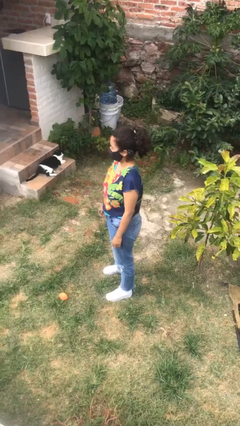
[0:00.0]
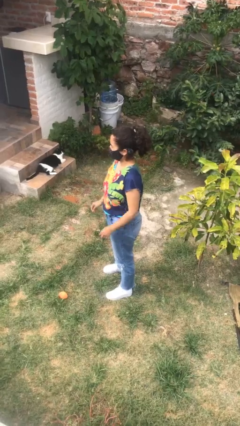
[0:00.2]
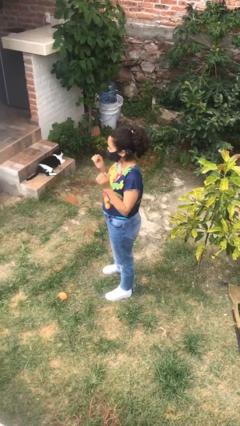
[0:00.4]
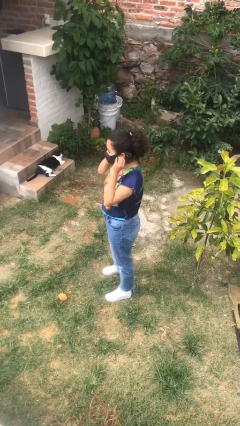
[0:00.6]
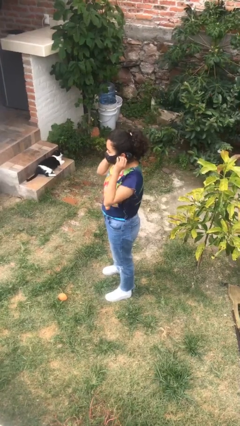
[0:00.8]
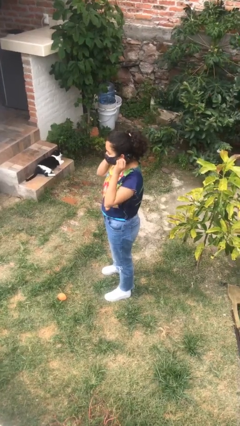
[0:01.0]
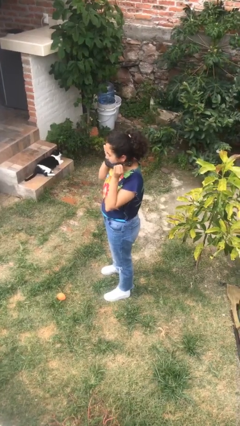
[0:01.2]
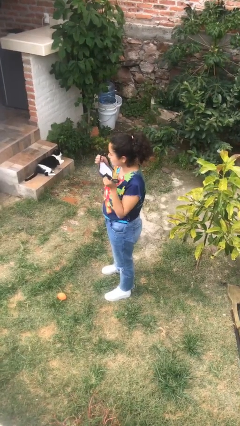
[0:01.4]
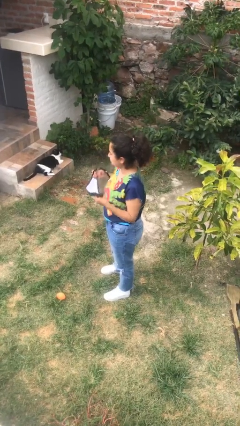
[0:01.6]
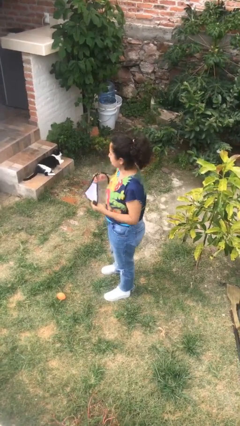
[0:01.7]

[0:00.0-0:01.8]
person takes off facemask

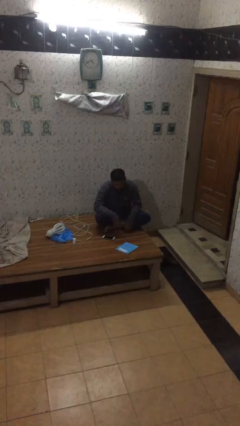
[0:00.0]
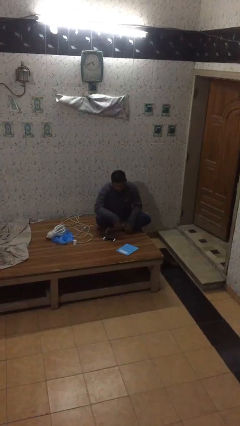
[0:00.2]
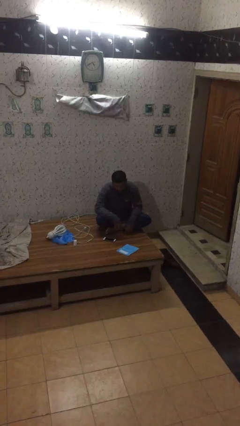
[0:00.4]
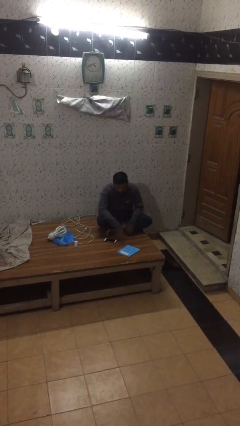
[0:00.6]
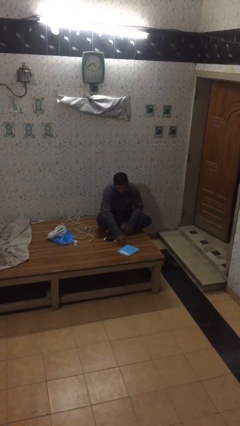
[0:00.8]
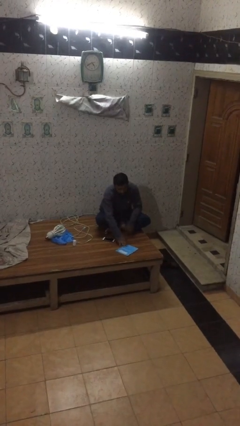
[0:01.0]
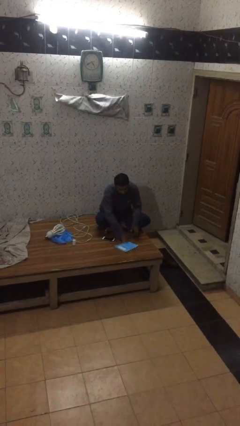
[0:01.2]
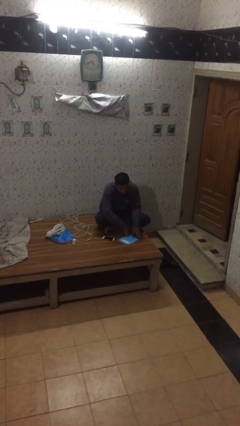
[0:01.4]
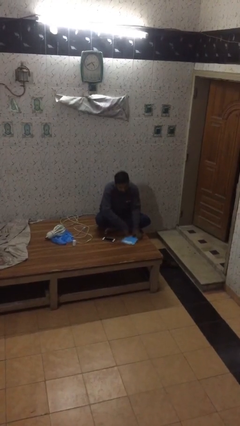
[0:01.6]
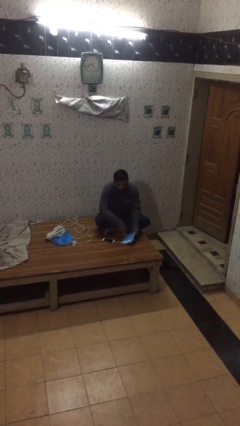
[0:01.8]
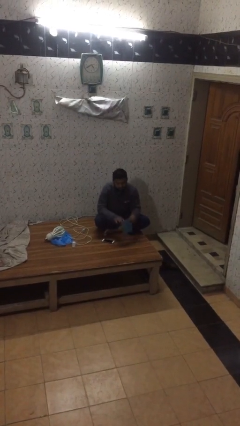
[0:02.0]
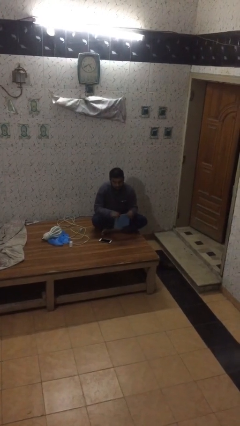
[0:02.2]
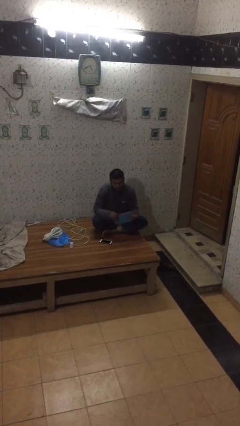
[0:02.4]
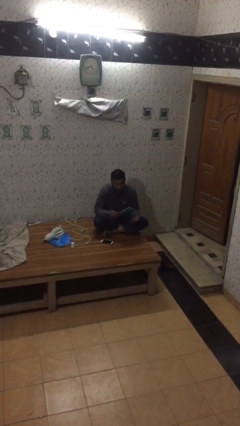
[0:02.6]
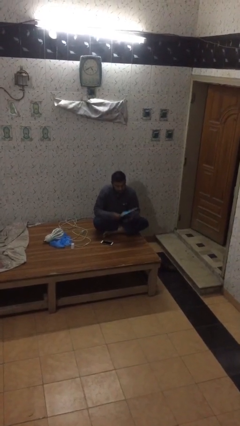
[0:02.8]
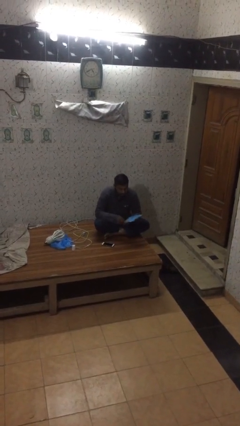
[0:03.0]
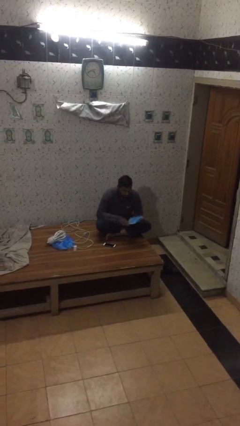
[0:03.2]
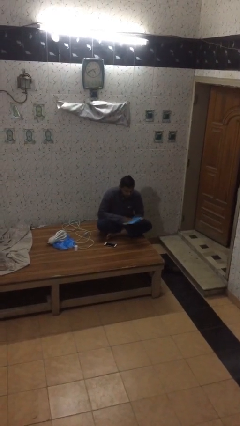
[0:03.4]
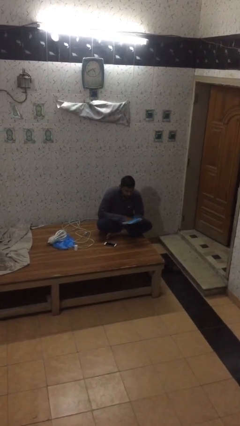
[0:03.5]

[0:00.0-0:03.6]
person picks up object from table

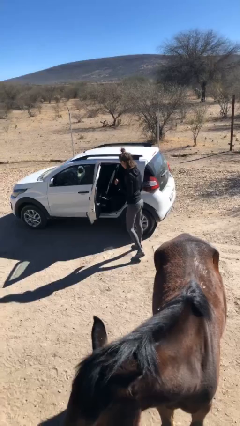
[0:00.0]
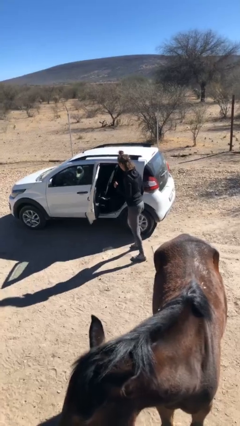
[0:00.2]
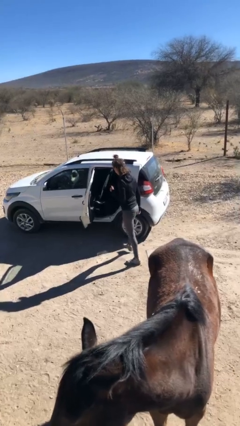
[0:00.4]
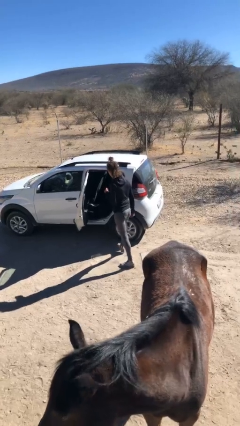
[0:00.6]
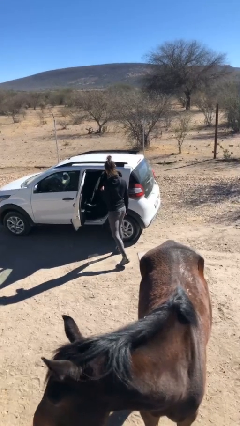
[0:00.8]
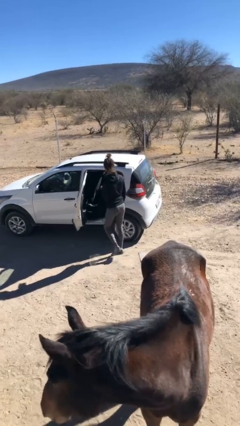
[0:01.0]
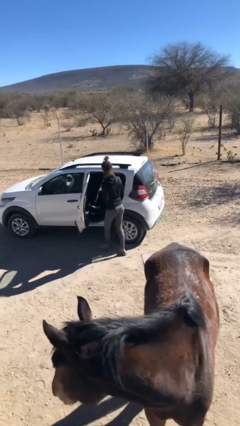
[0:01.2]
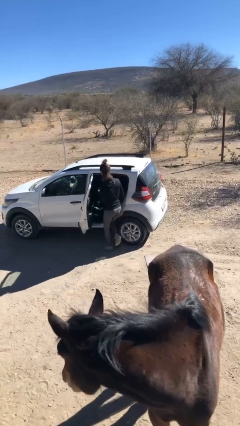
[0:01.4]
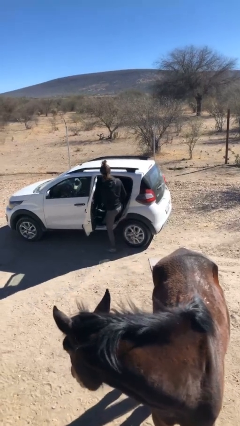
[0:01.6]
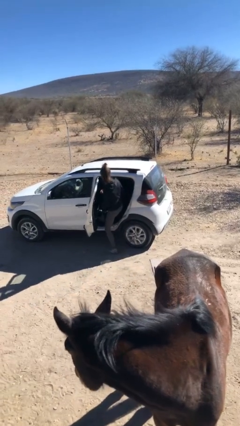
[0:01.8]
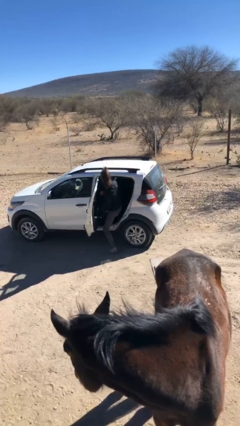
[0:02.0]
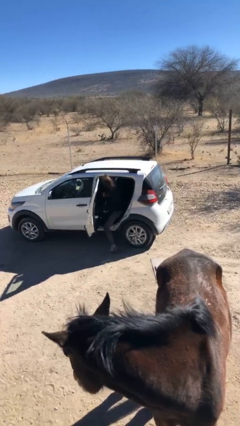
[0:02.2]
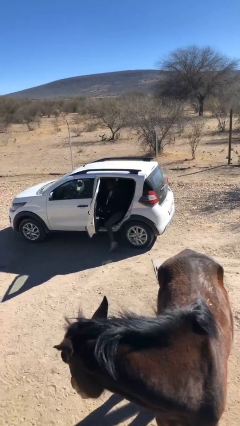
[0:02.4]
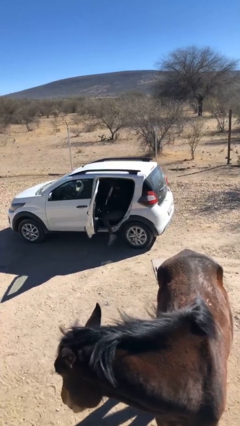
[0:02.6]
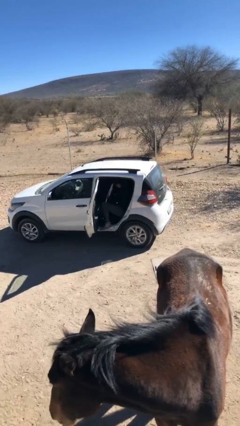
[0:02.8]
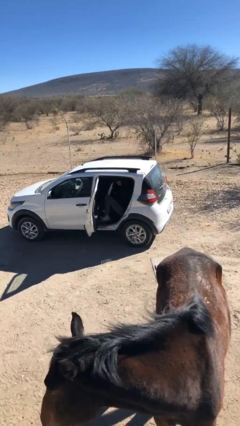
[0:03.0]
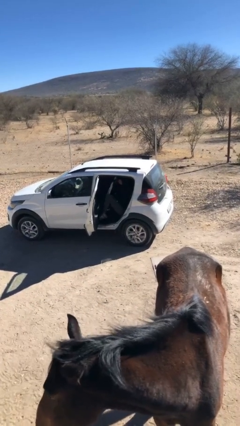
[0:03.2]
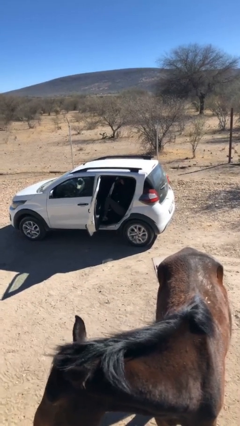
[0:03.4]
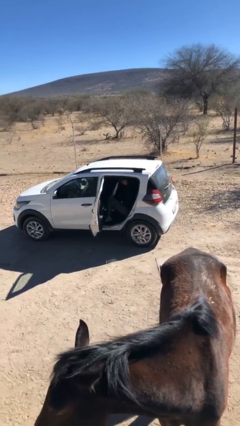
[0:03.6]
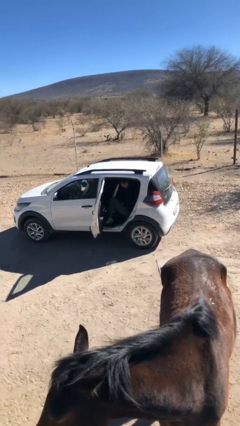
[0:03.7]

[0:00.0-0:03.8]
person enters car

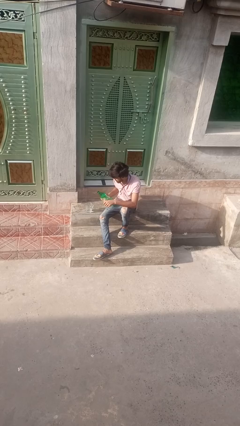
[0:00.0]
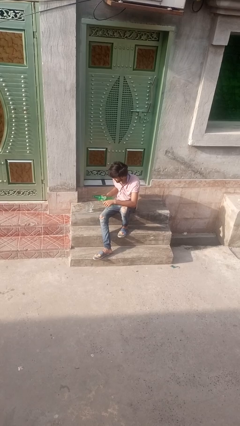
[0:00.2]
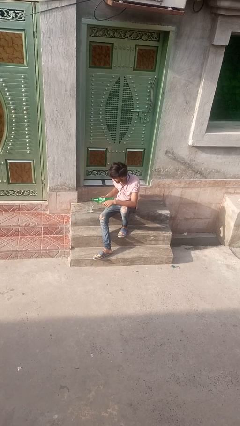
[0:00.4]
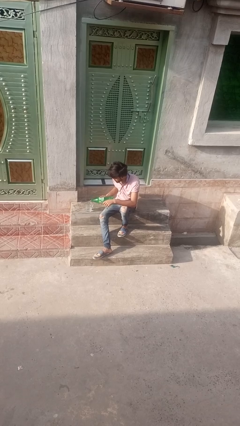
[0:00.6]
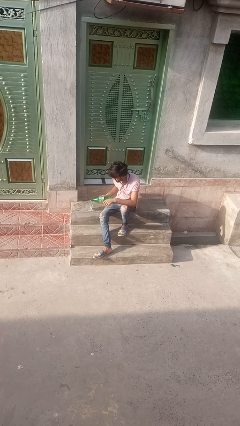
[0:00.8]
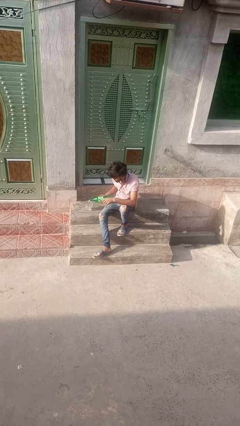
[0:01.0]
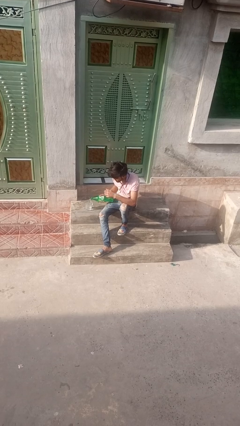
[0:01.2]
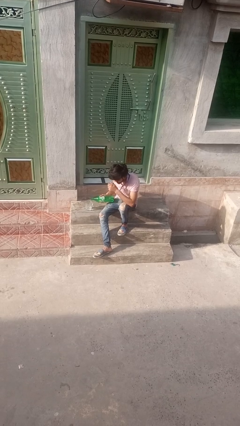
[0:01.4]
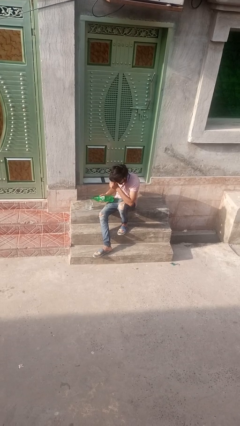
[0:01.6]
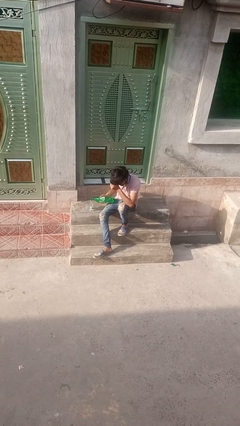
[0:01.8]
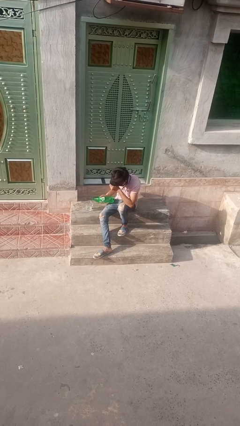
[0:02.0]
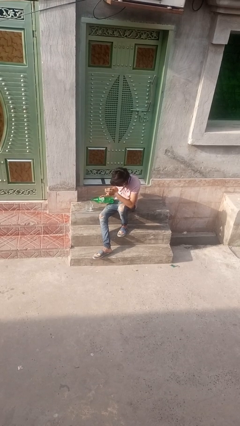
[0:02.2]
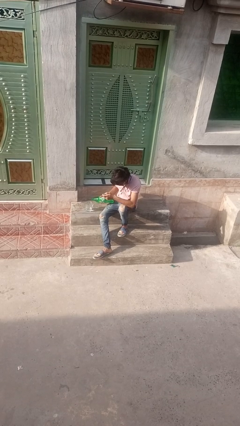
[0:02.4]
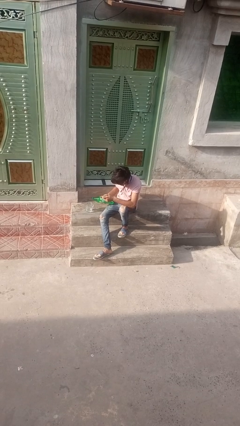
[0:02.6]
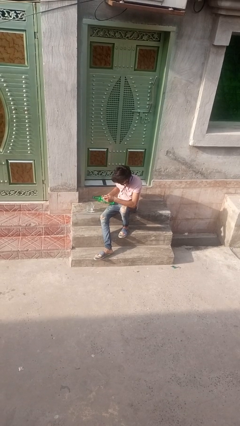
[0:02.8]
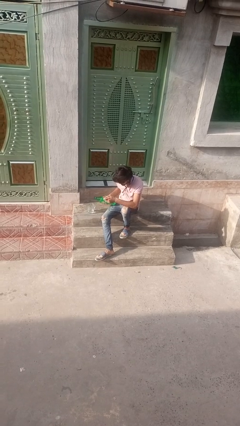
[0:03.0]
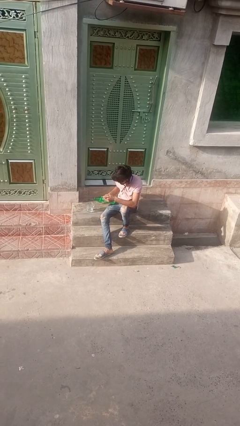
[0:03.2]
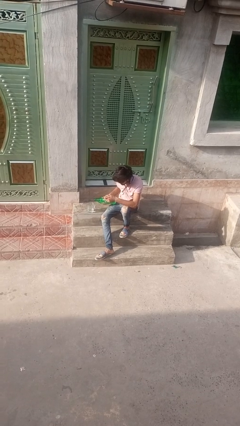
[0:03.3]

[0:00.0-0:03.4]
person pours liquid into cup

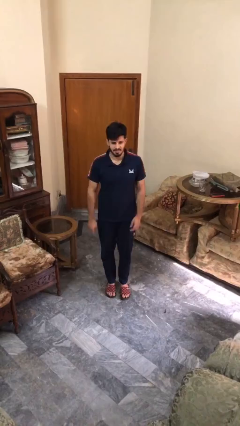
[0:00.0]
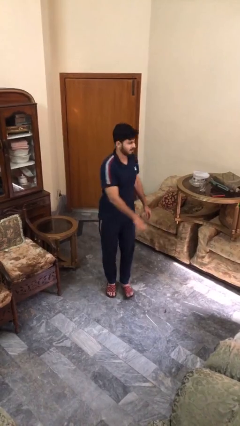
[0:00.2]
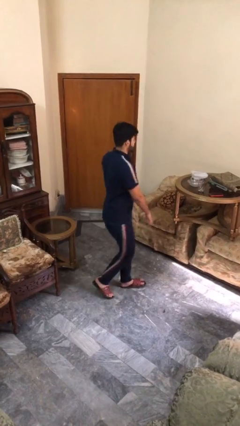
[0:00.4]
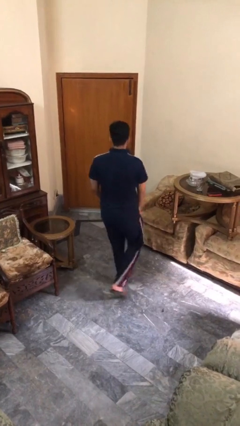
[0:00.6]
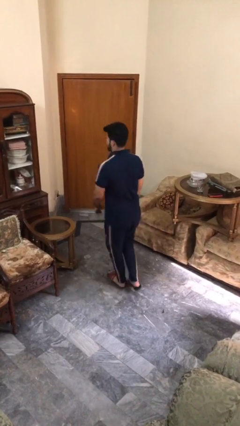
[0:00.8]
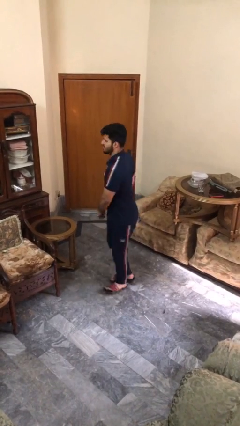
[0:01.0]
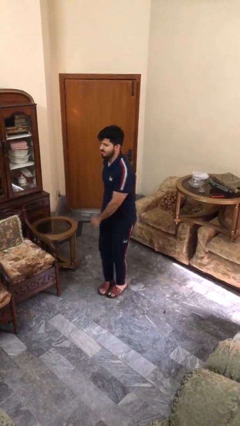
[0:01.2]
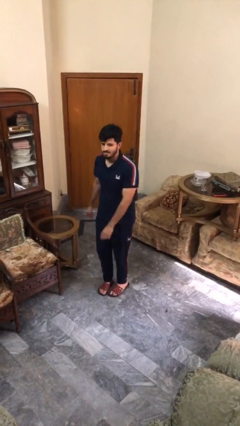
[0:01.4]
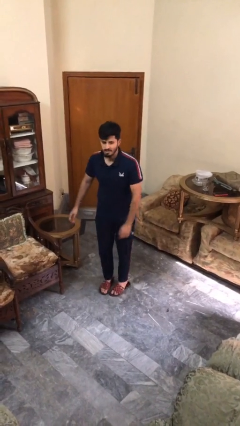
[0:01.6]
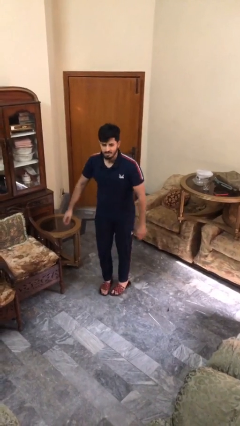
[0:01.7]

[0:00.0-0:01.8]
person twirls

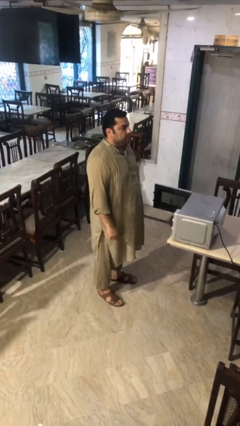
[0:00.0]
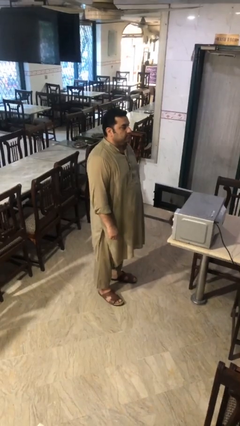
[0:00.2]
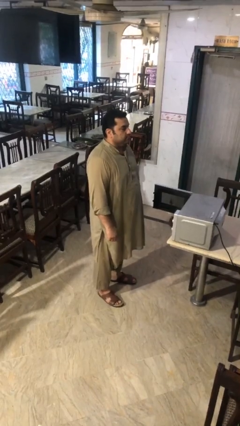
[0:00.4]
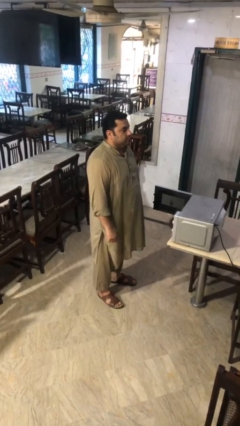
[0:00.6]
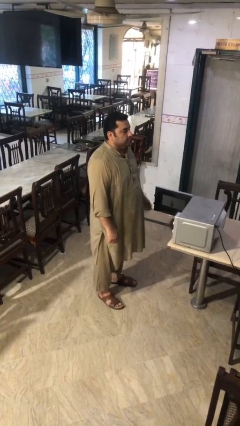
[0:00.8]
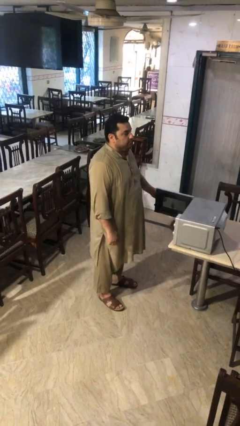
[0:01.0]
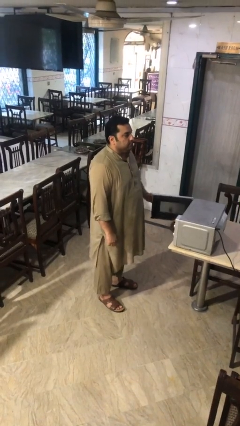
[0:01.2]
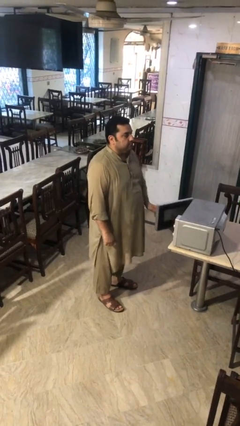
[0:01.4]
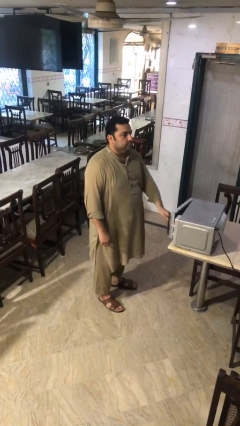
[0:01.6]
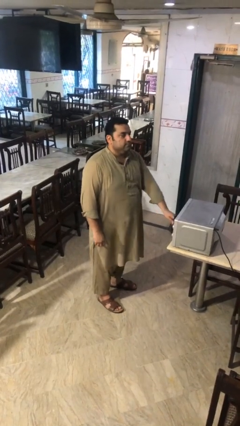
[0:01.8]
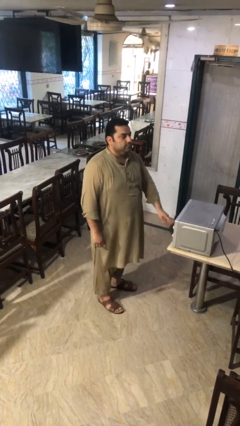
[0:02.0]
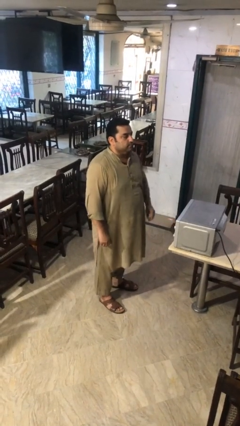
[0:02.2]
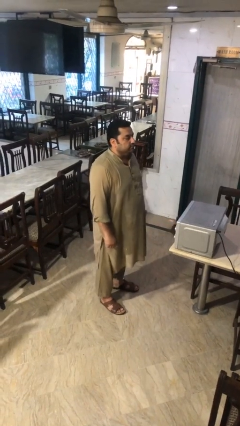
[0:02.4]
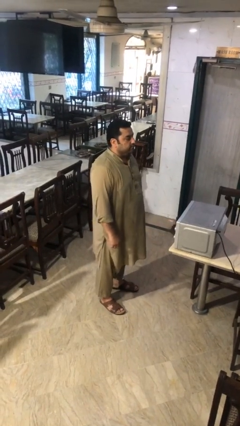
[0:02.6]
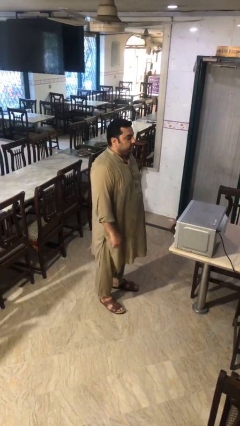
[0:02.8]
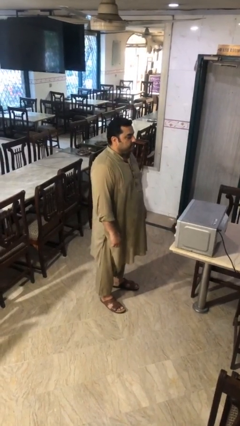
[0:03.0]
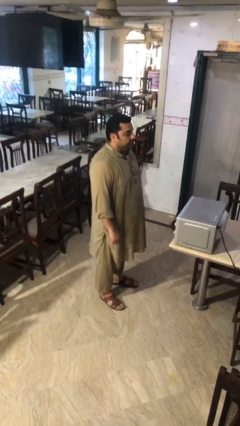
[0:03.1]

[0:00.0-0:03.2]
person closes microwave
